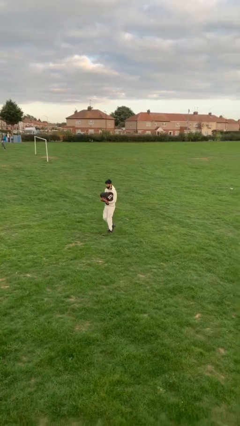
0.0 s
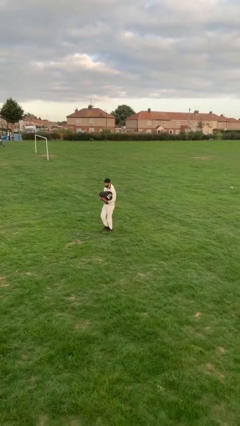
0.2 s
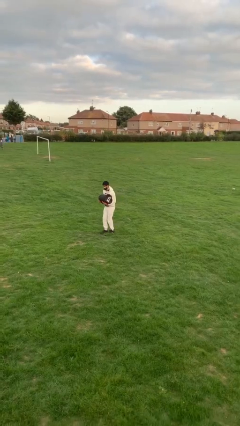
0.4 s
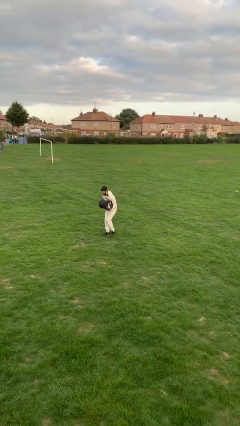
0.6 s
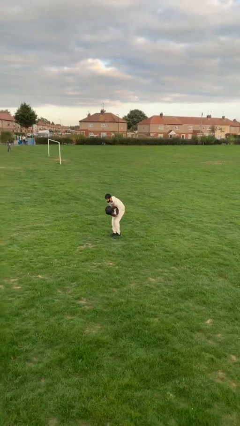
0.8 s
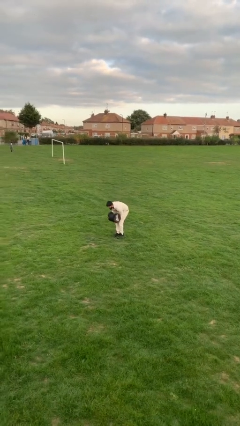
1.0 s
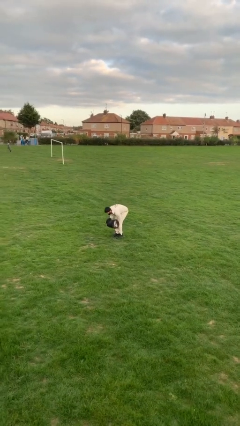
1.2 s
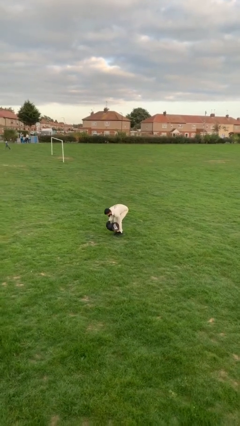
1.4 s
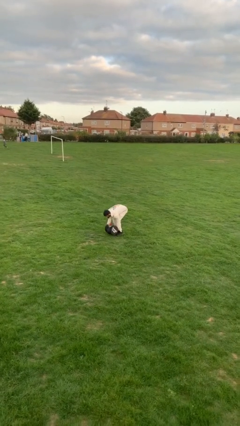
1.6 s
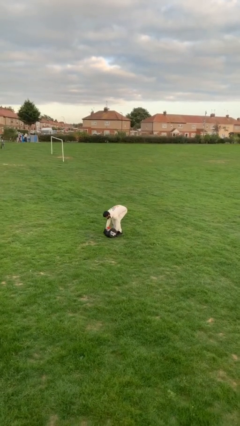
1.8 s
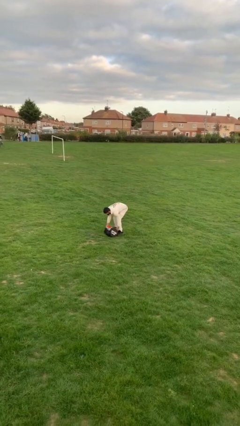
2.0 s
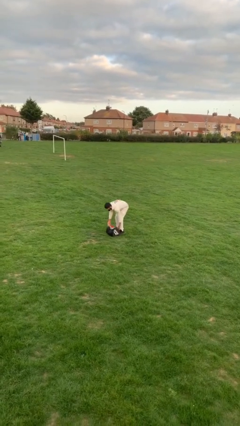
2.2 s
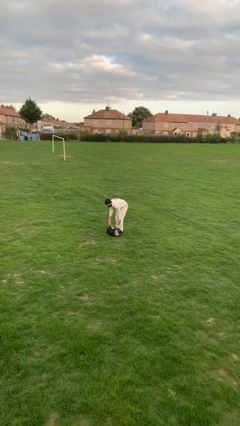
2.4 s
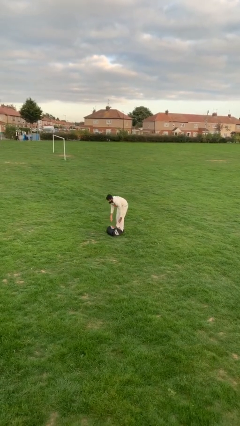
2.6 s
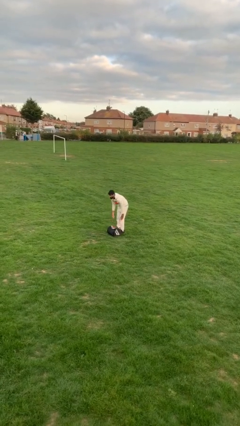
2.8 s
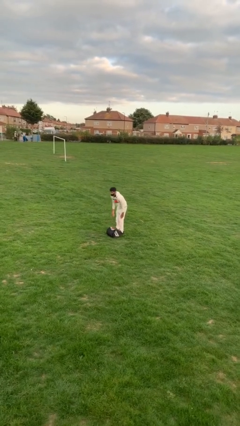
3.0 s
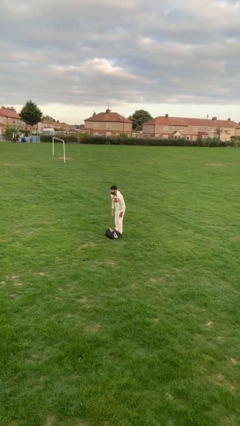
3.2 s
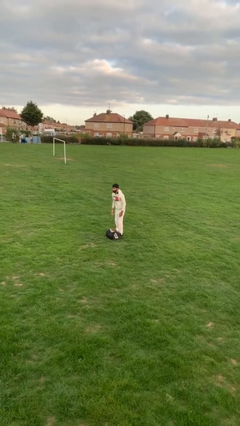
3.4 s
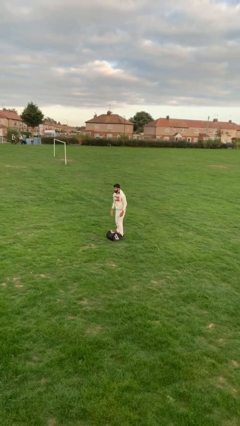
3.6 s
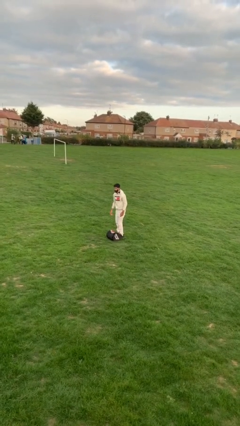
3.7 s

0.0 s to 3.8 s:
person puts down object on floor

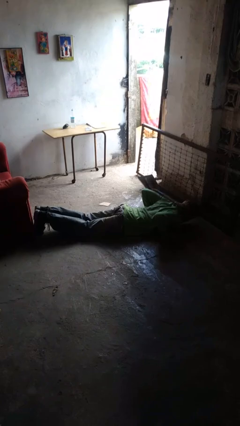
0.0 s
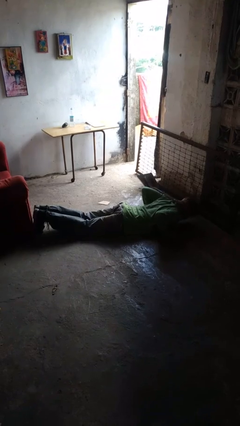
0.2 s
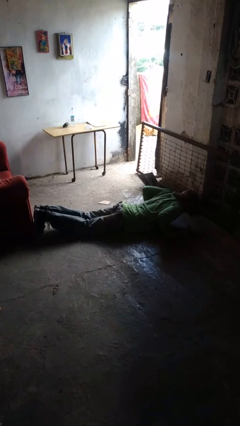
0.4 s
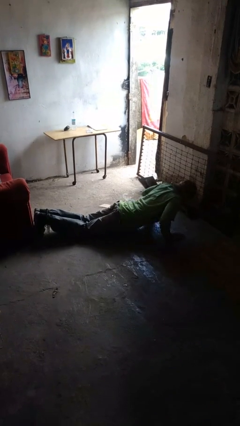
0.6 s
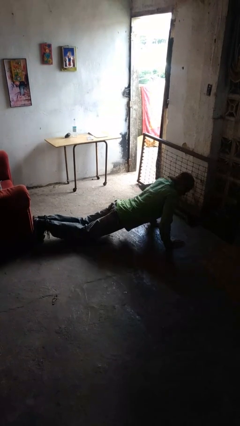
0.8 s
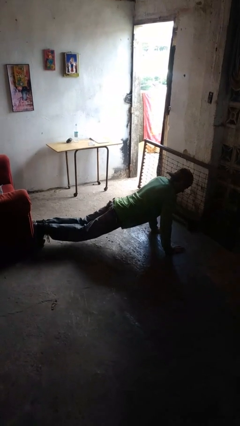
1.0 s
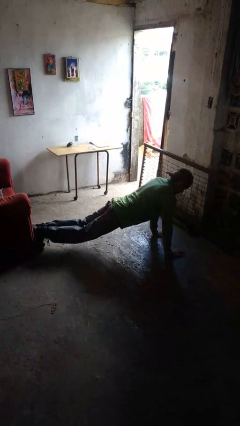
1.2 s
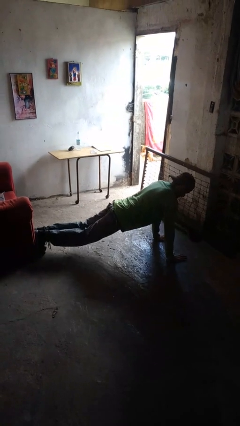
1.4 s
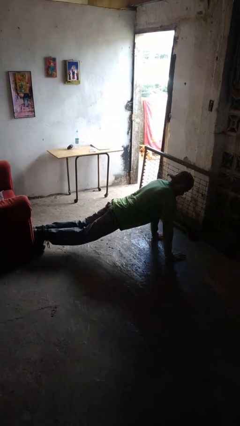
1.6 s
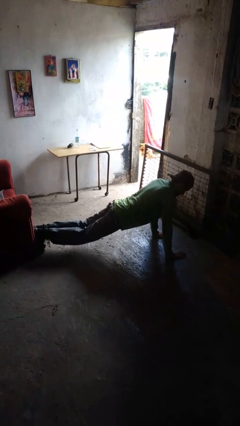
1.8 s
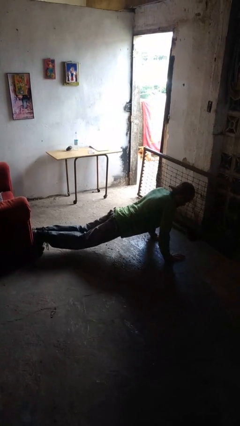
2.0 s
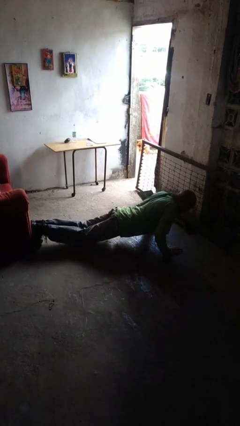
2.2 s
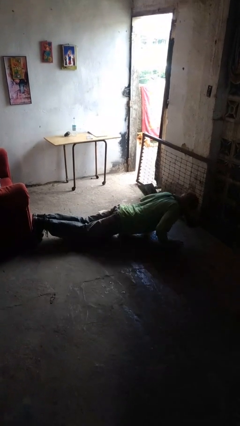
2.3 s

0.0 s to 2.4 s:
person exercises with pushup

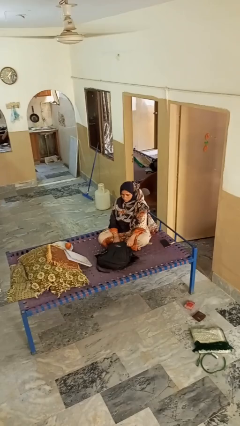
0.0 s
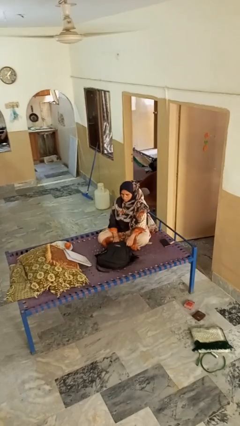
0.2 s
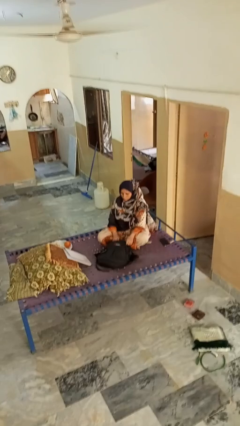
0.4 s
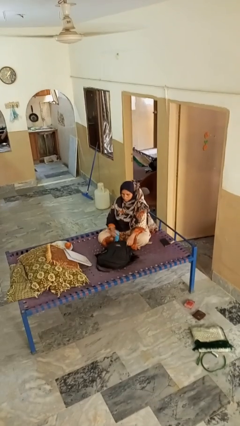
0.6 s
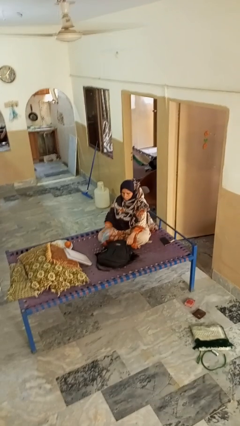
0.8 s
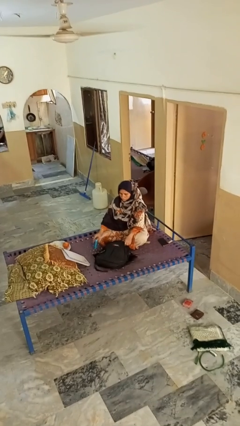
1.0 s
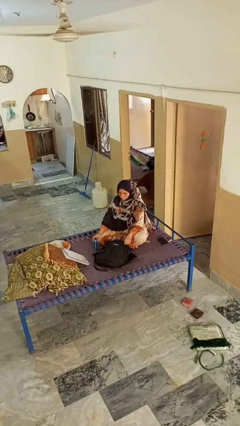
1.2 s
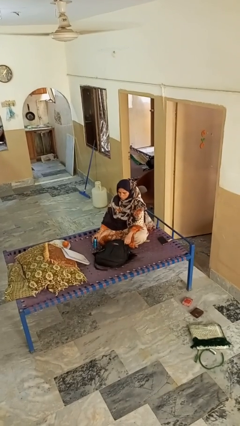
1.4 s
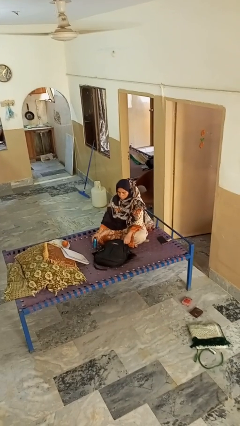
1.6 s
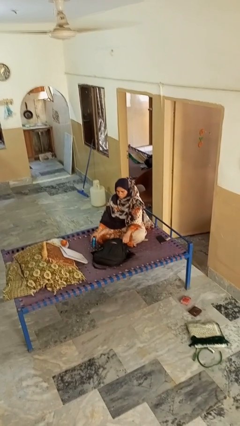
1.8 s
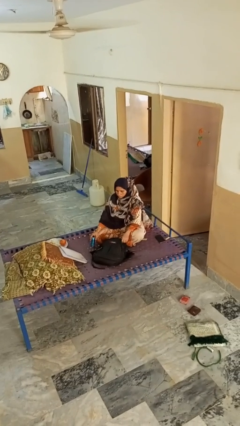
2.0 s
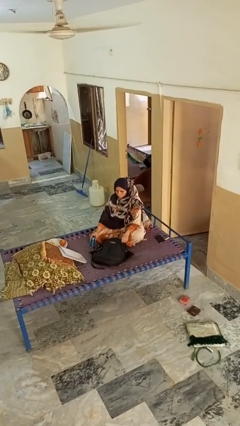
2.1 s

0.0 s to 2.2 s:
person takes object from bag

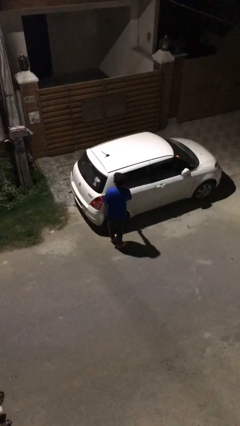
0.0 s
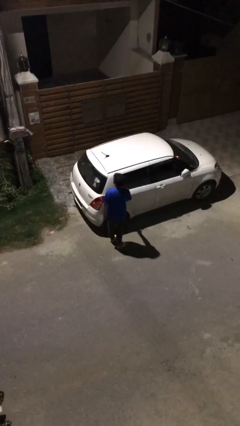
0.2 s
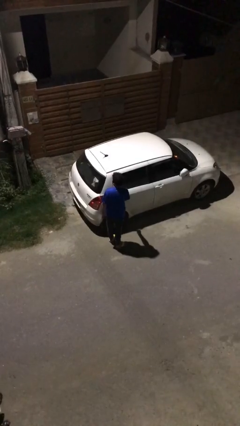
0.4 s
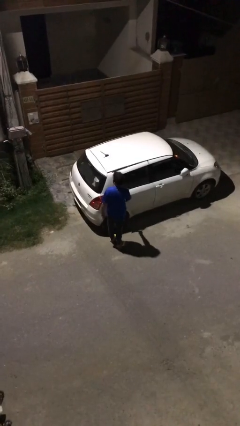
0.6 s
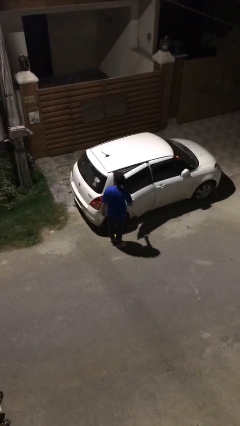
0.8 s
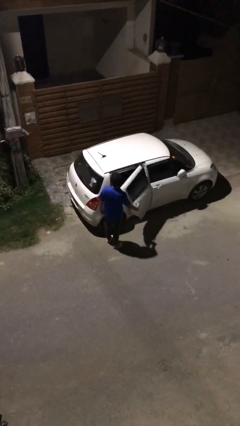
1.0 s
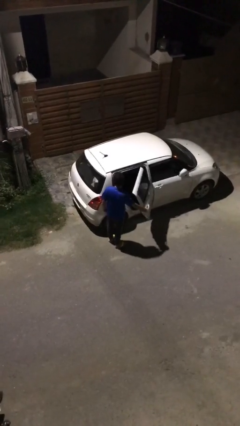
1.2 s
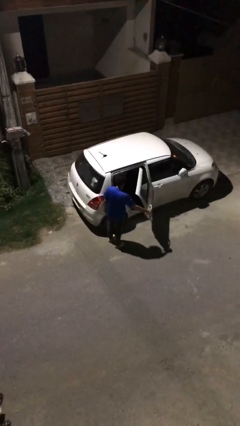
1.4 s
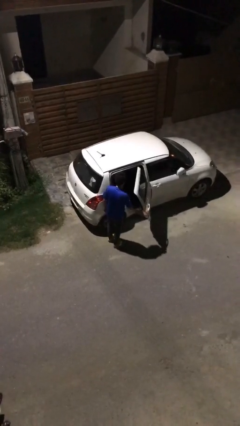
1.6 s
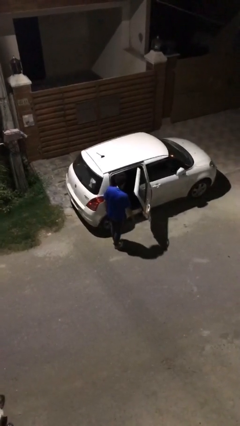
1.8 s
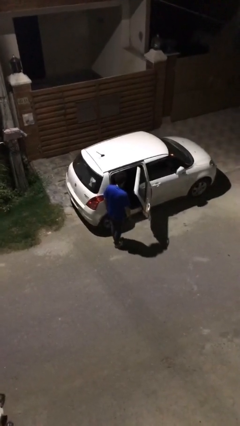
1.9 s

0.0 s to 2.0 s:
person opens car door

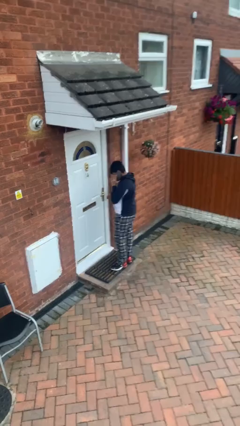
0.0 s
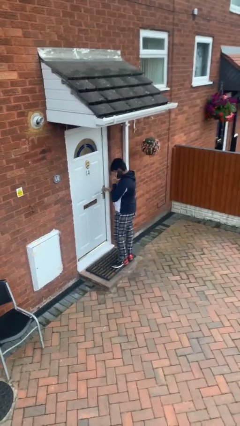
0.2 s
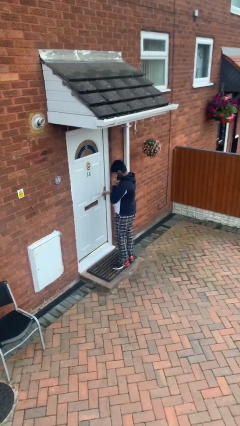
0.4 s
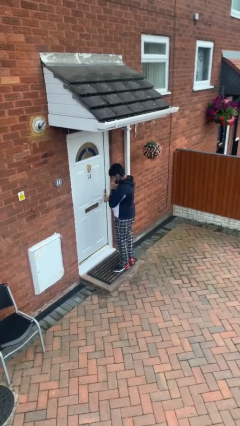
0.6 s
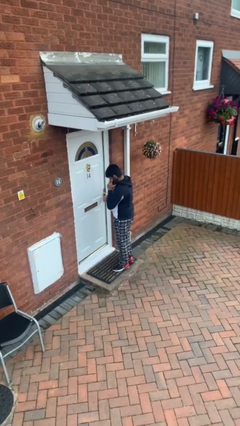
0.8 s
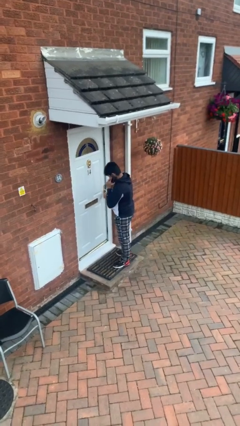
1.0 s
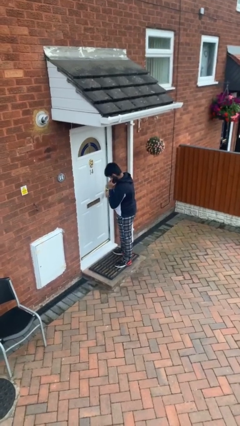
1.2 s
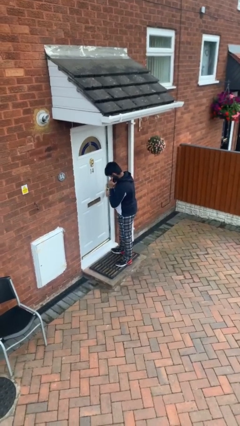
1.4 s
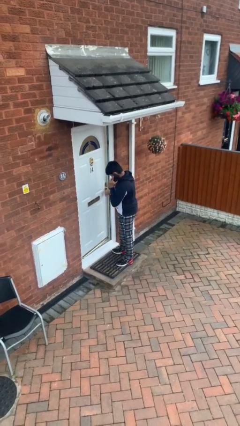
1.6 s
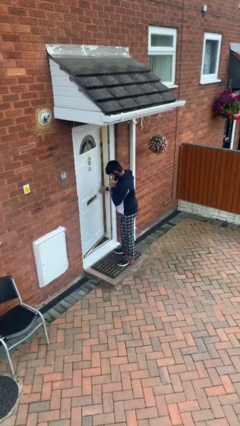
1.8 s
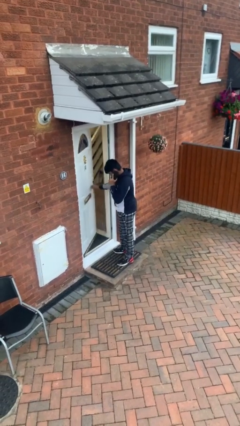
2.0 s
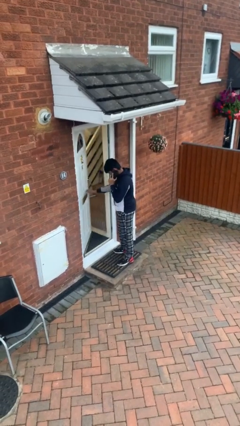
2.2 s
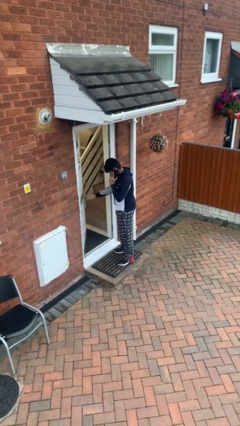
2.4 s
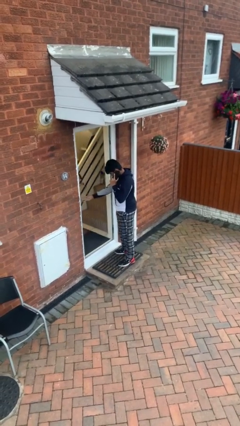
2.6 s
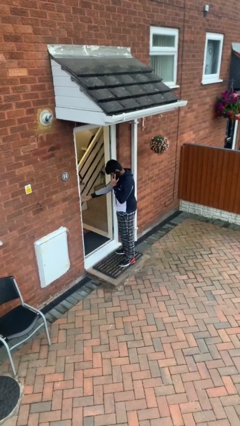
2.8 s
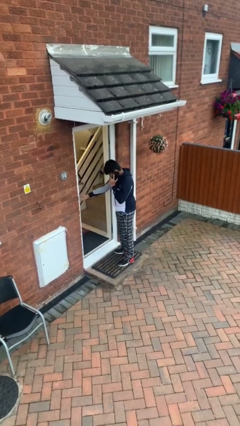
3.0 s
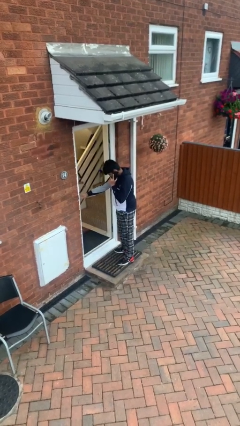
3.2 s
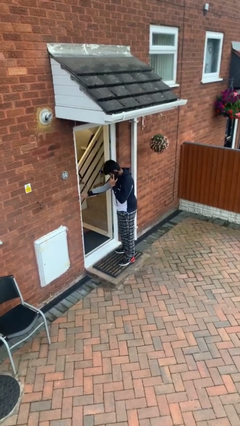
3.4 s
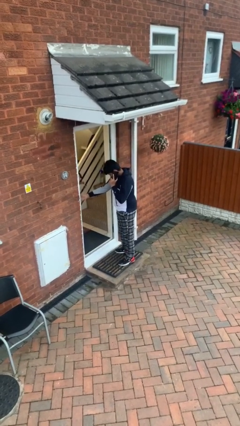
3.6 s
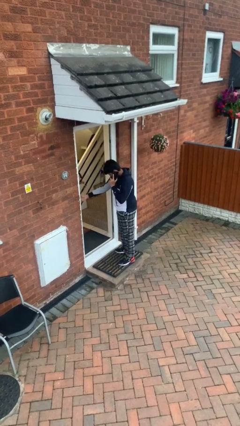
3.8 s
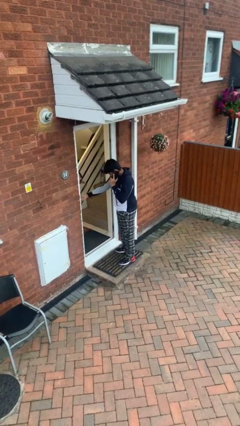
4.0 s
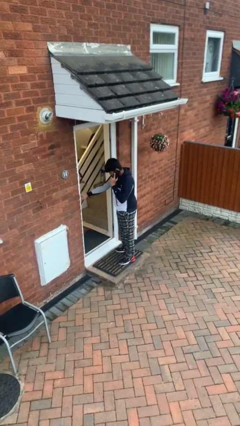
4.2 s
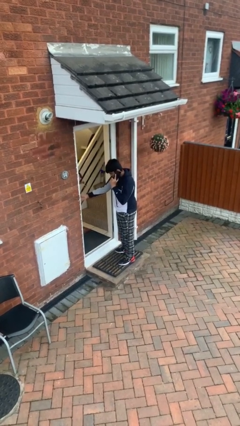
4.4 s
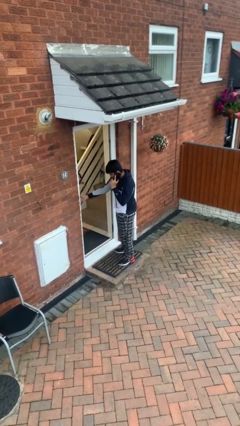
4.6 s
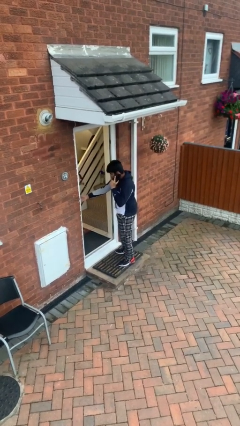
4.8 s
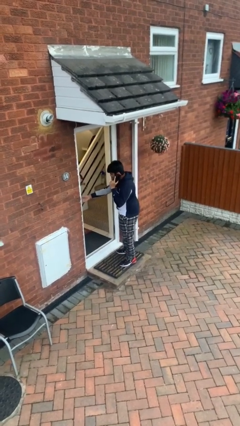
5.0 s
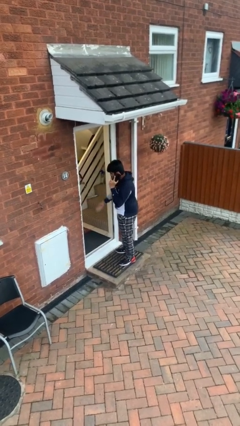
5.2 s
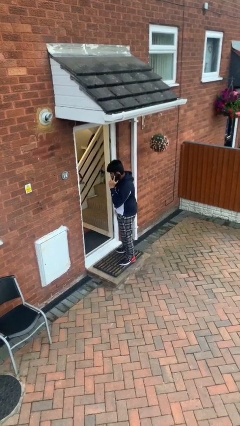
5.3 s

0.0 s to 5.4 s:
person opens facility door

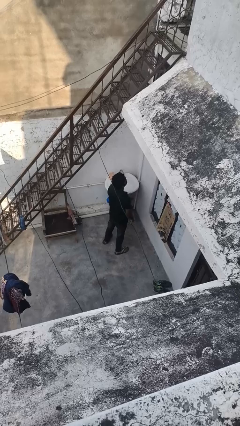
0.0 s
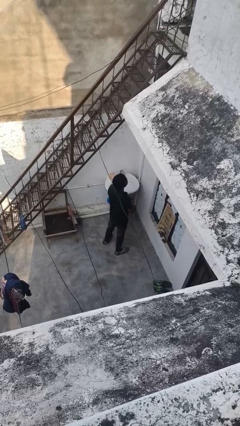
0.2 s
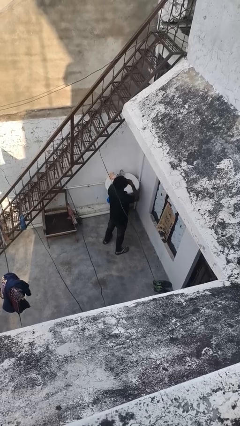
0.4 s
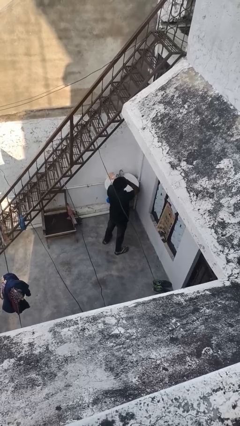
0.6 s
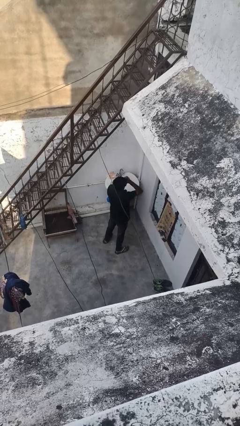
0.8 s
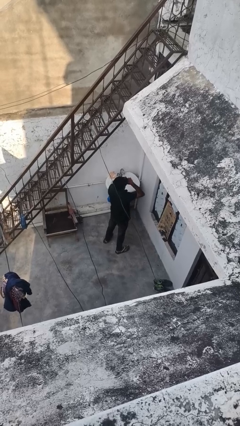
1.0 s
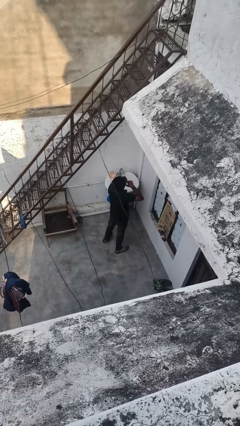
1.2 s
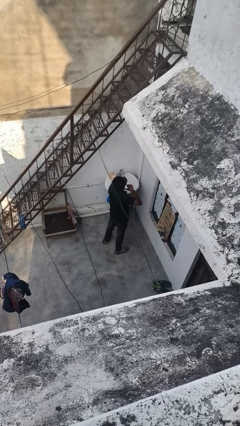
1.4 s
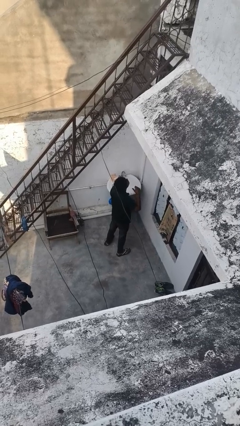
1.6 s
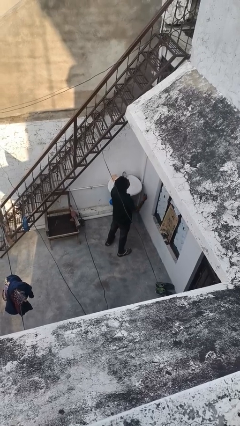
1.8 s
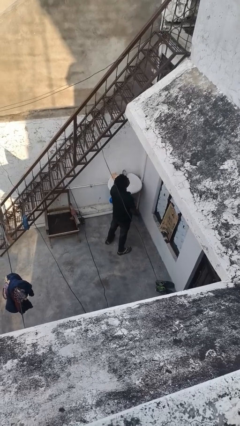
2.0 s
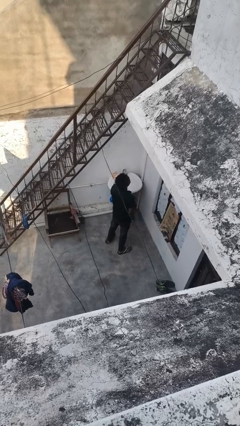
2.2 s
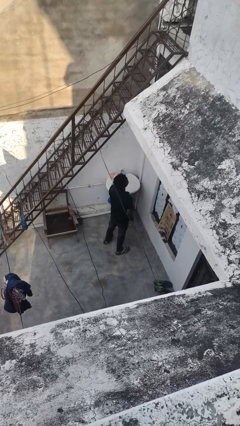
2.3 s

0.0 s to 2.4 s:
person gestures cut
